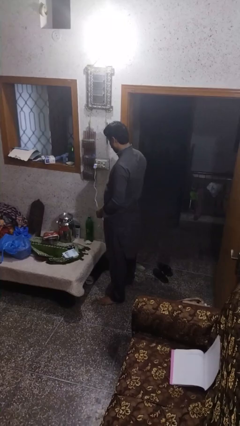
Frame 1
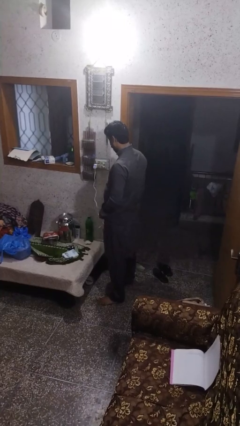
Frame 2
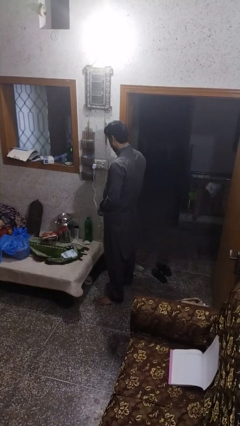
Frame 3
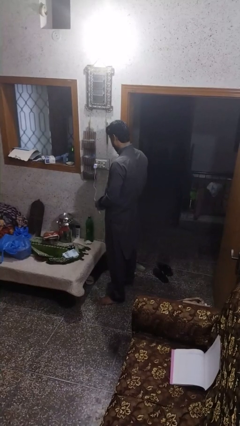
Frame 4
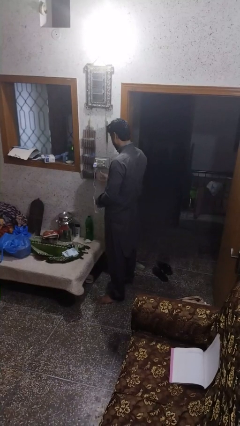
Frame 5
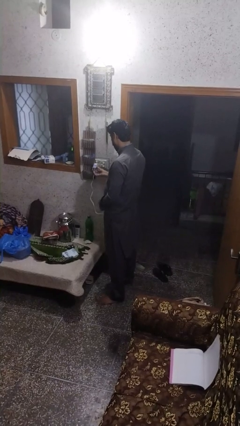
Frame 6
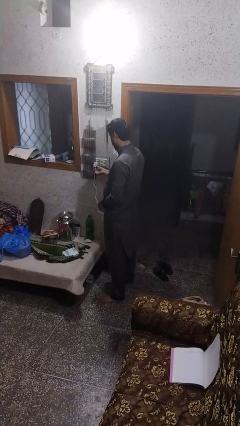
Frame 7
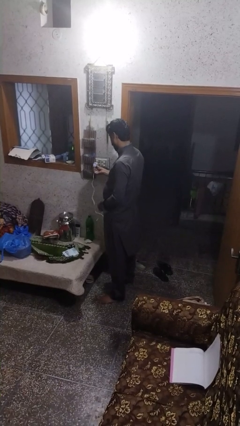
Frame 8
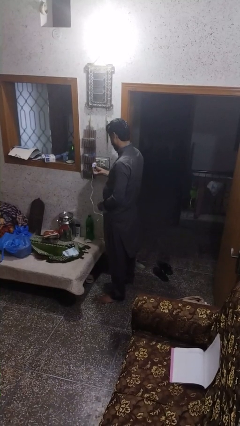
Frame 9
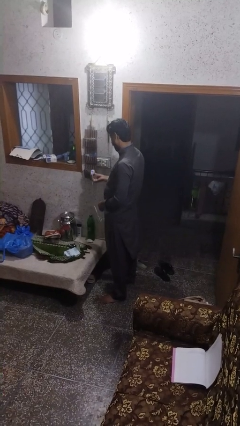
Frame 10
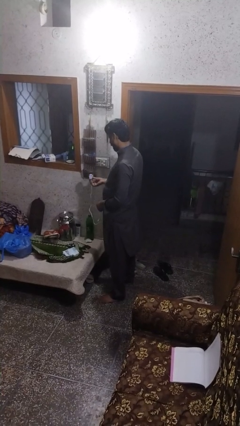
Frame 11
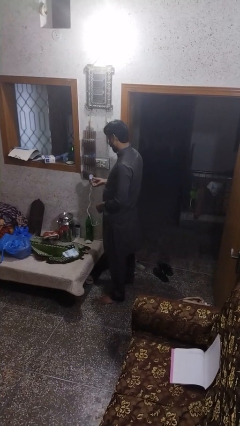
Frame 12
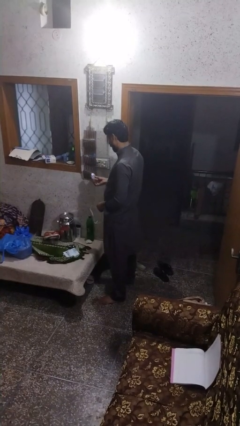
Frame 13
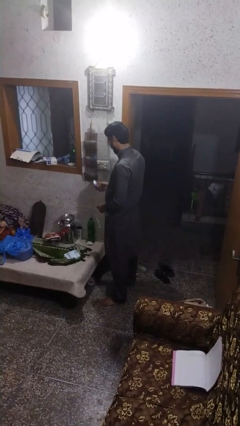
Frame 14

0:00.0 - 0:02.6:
person unplugs from electrical socket

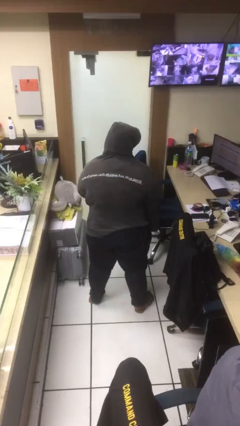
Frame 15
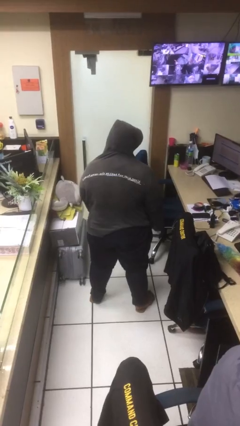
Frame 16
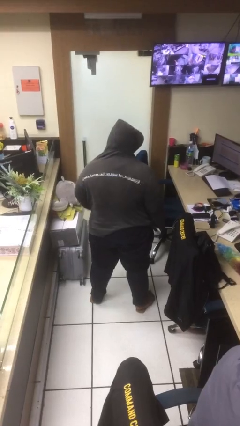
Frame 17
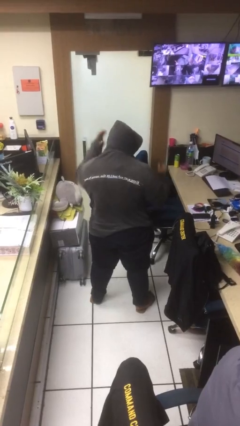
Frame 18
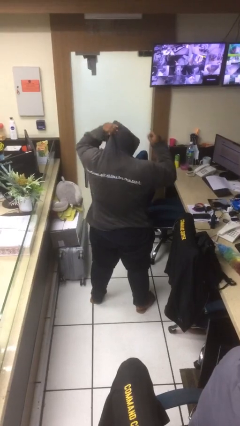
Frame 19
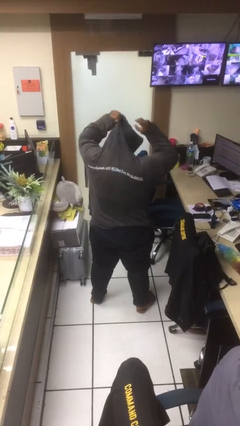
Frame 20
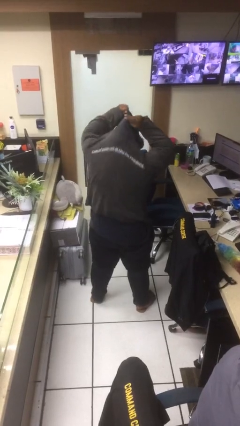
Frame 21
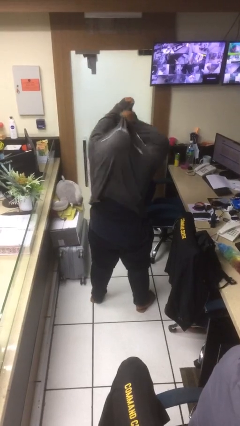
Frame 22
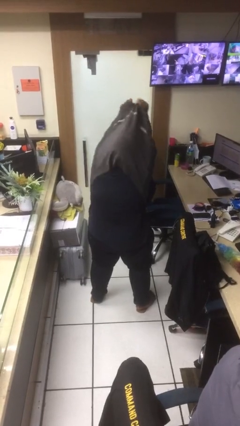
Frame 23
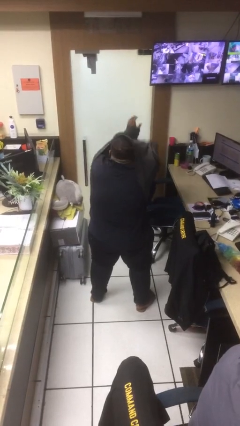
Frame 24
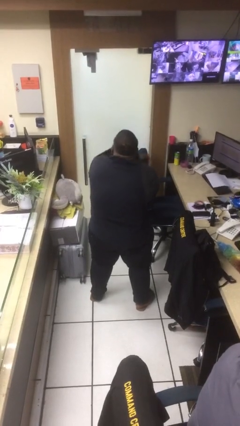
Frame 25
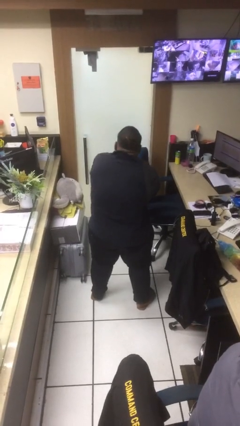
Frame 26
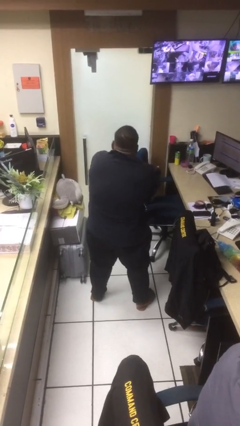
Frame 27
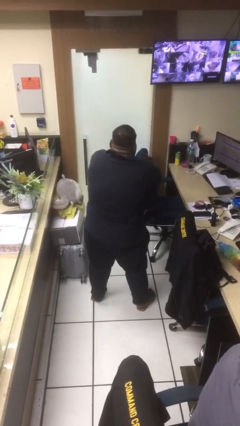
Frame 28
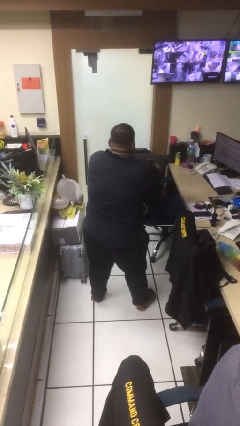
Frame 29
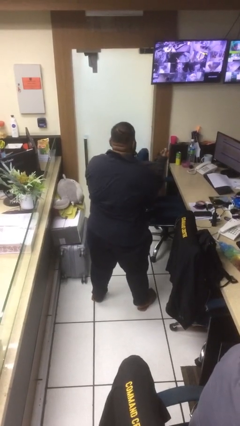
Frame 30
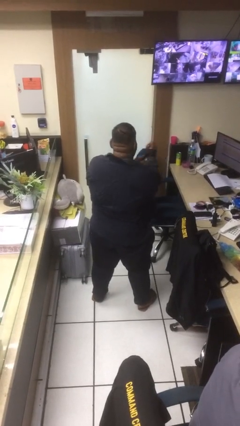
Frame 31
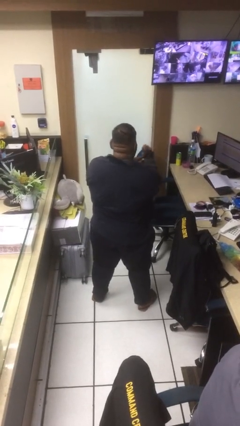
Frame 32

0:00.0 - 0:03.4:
person takes off hoodie

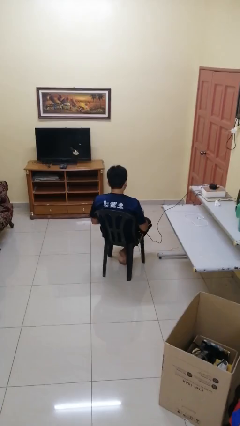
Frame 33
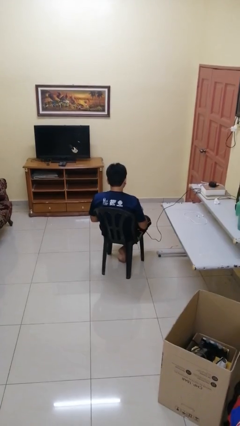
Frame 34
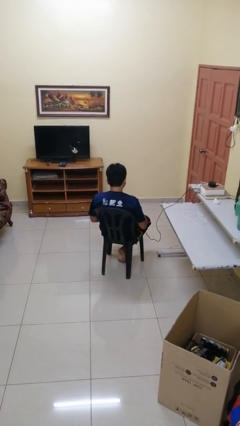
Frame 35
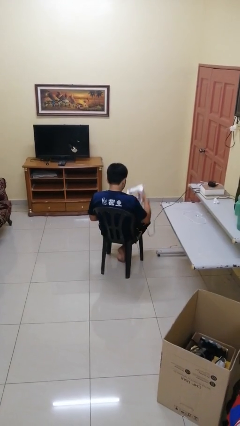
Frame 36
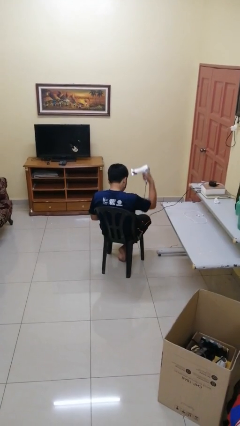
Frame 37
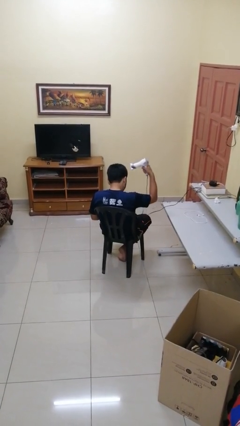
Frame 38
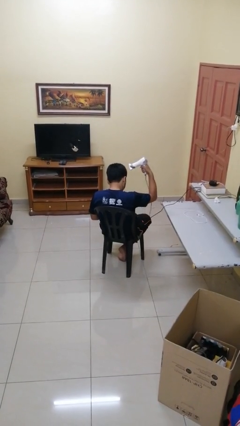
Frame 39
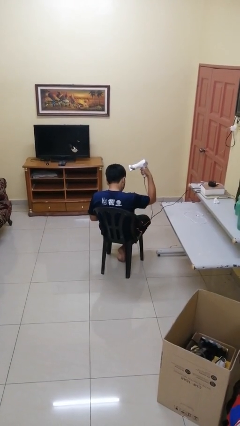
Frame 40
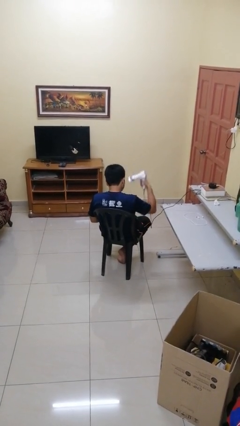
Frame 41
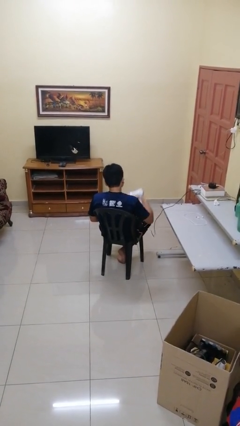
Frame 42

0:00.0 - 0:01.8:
person dries hair with hairdryer

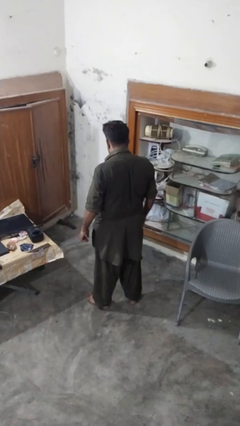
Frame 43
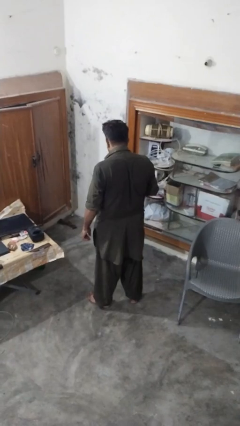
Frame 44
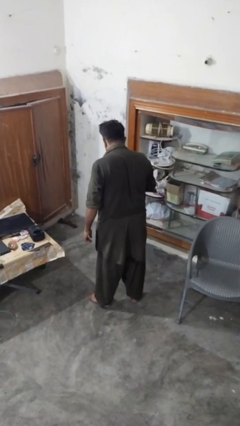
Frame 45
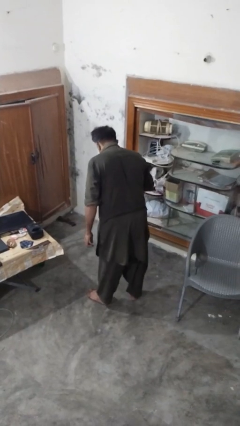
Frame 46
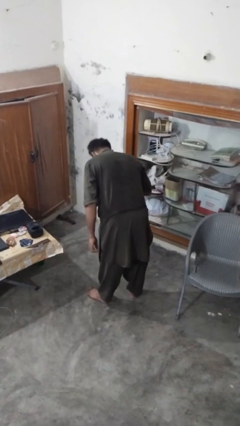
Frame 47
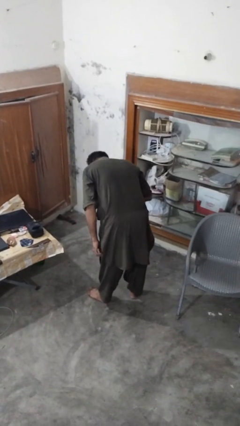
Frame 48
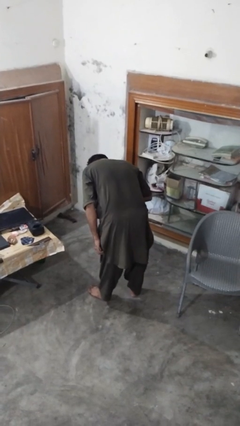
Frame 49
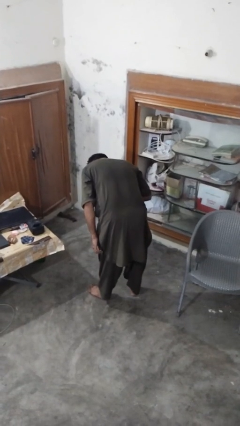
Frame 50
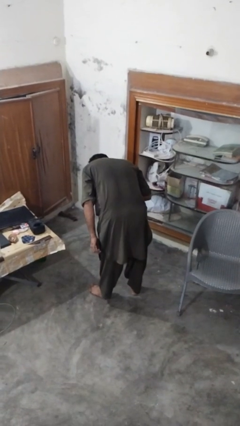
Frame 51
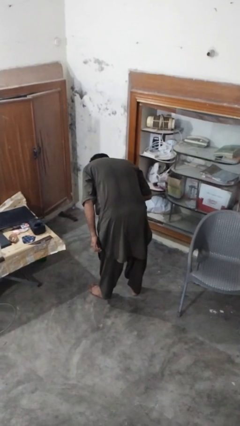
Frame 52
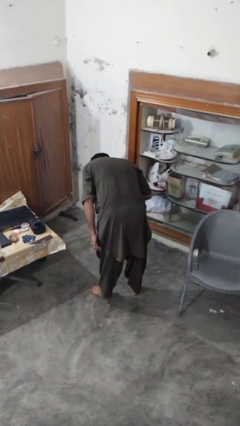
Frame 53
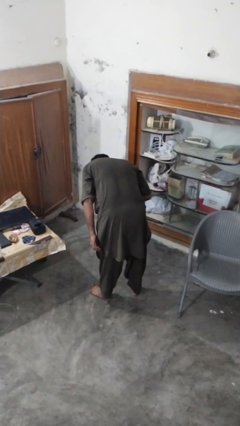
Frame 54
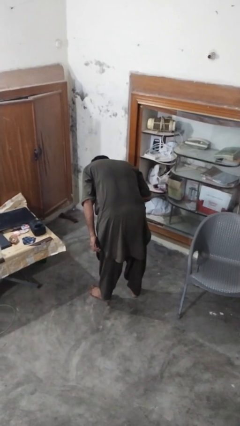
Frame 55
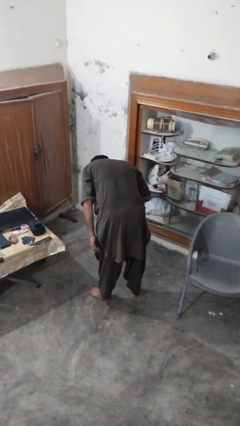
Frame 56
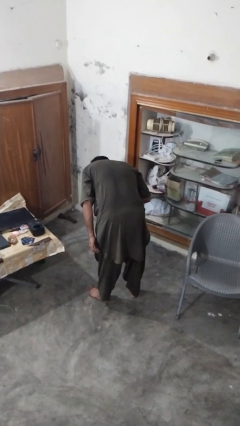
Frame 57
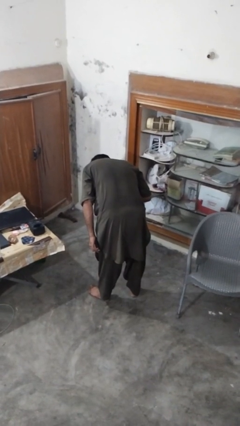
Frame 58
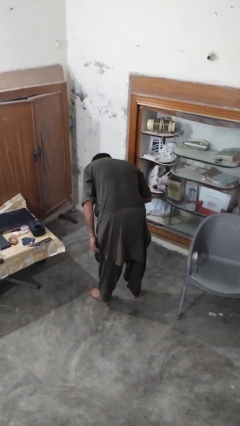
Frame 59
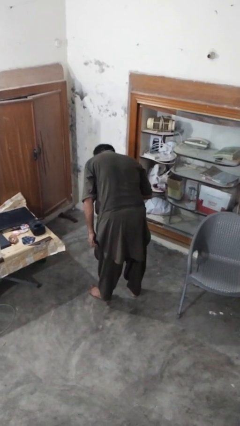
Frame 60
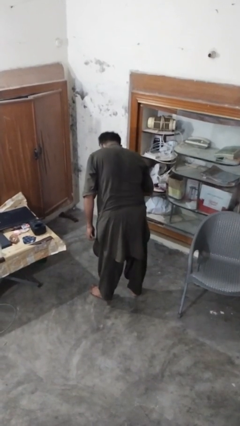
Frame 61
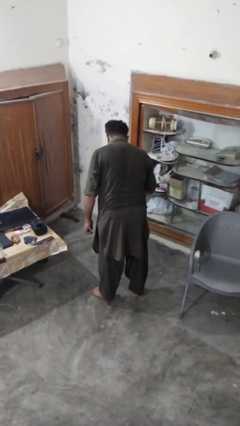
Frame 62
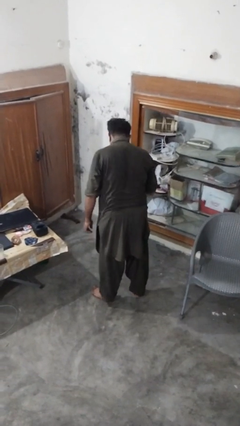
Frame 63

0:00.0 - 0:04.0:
person bows

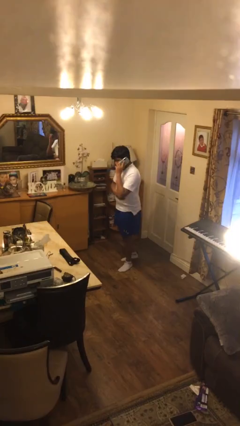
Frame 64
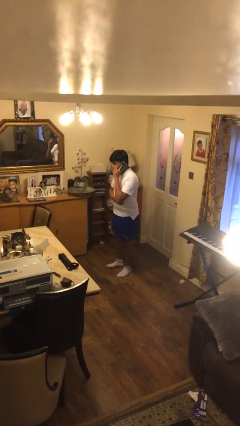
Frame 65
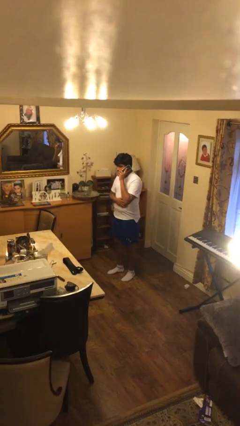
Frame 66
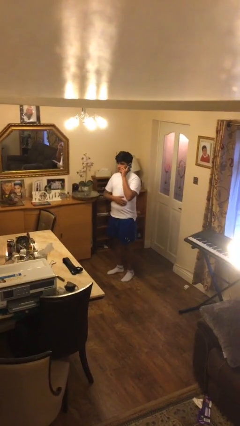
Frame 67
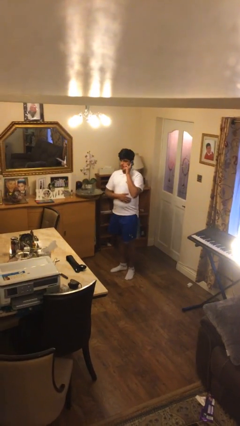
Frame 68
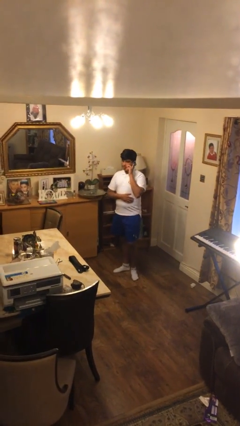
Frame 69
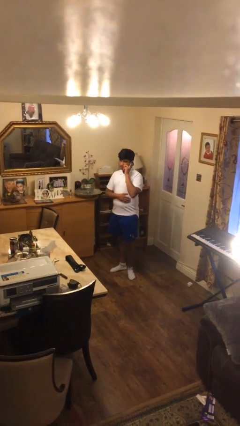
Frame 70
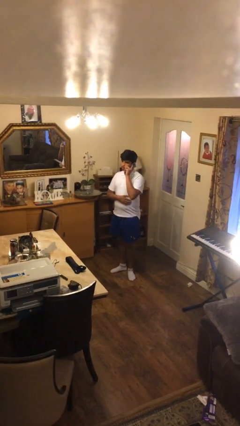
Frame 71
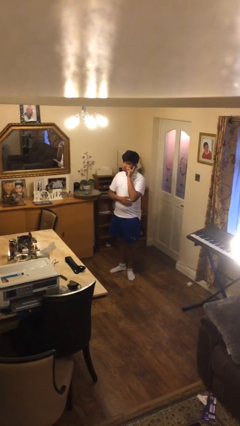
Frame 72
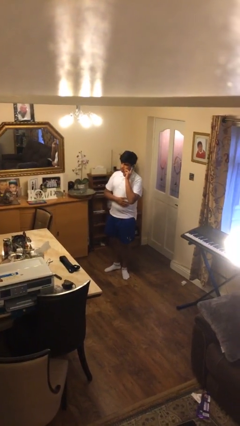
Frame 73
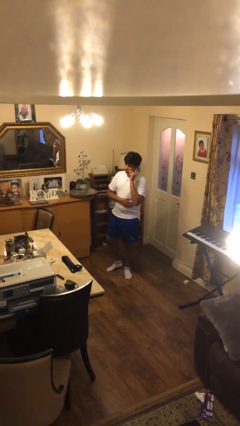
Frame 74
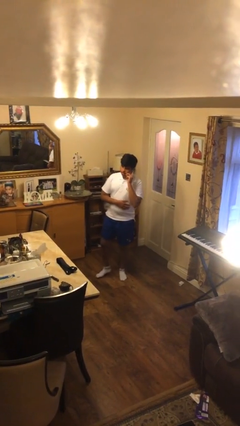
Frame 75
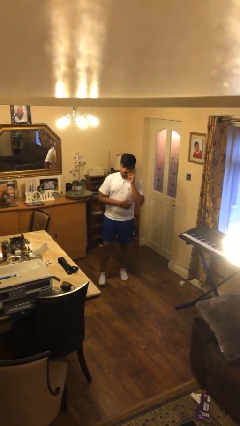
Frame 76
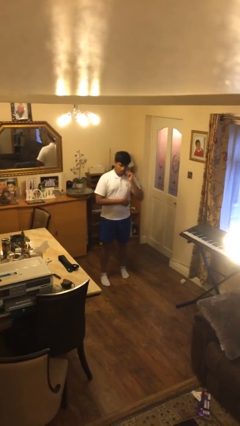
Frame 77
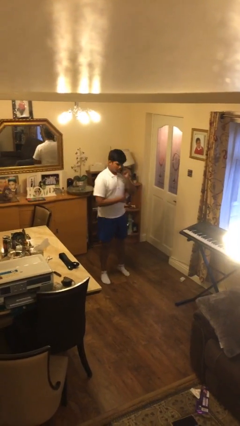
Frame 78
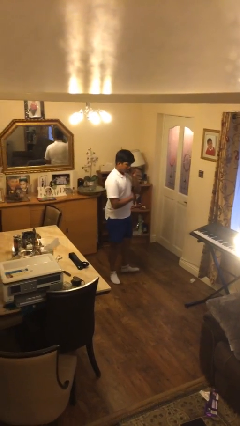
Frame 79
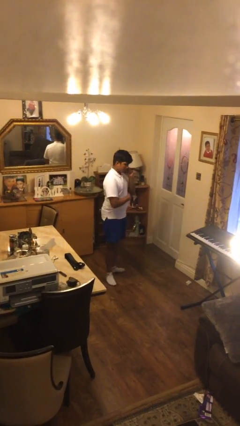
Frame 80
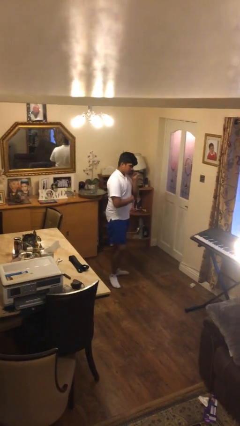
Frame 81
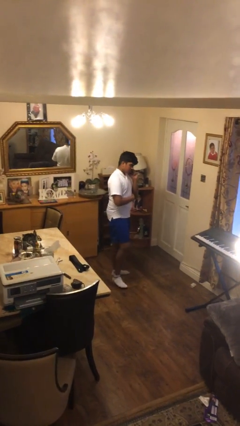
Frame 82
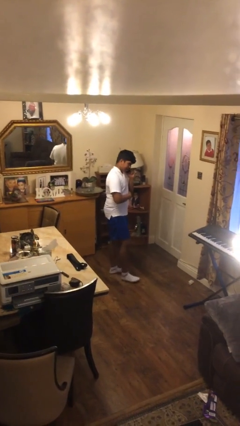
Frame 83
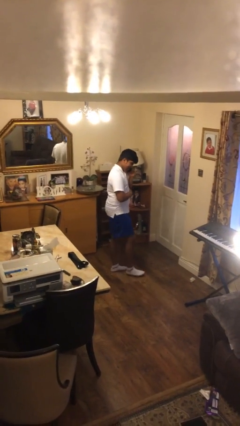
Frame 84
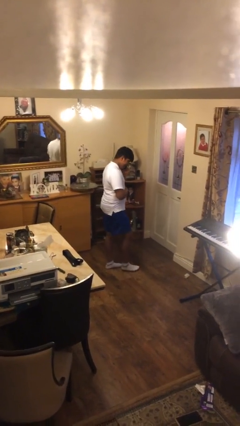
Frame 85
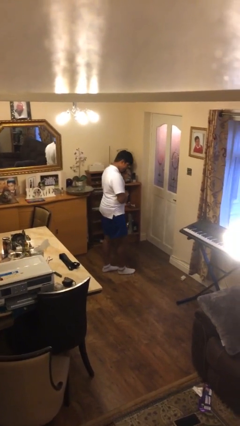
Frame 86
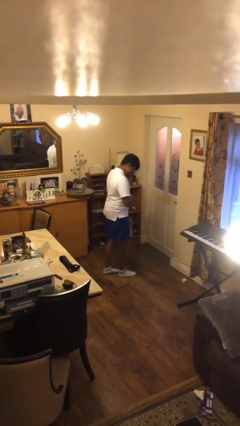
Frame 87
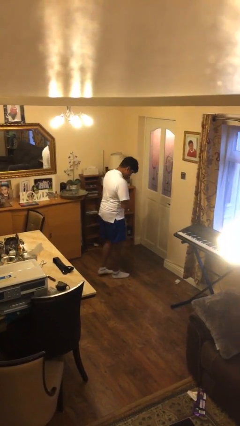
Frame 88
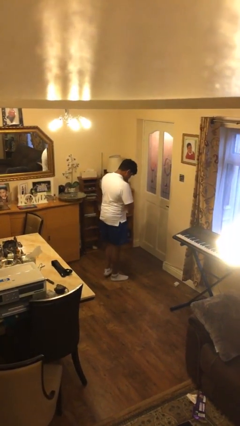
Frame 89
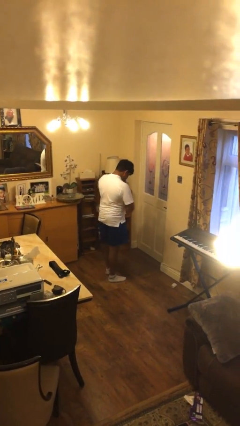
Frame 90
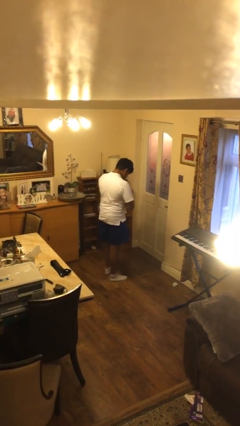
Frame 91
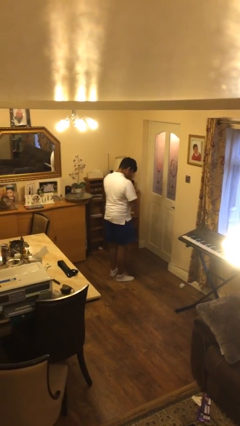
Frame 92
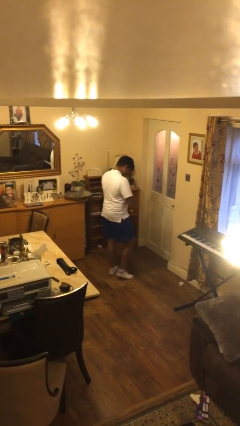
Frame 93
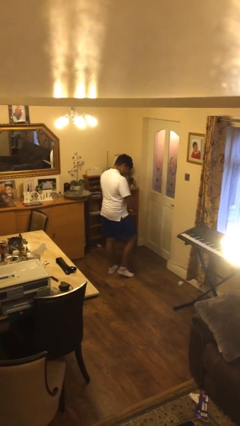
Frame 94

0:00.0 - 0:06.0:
person talks on phone
